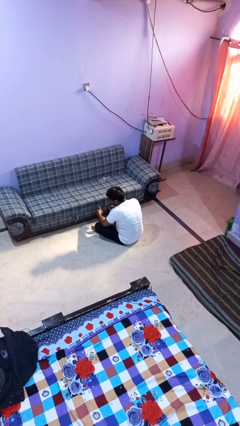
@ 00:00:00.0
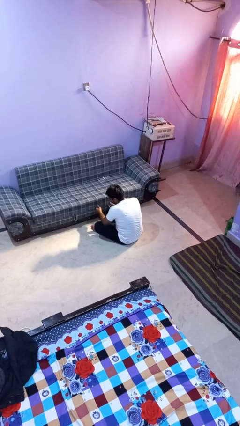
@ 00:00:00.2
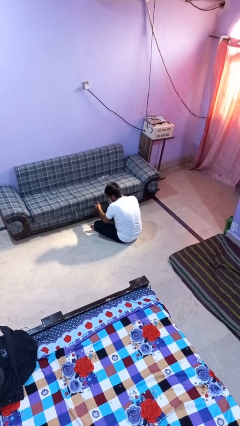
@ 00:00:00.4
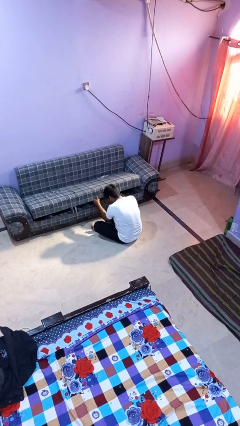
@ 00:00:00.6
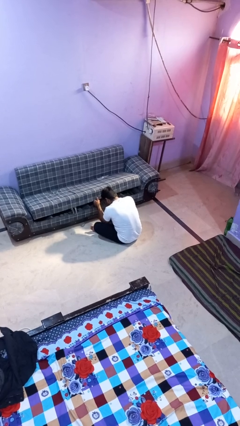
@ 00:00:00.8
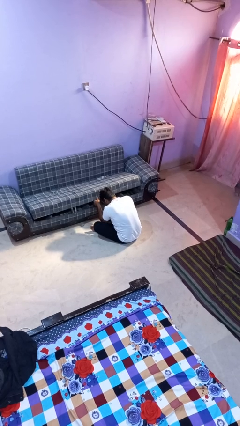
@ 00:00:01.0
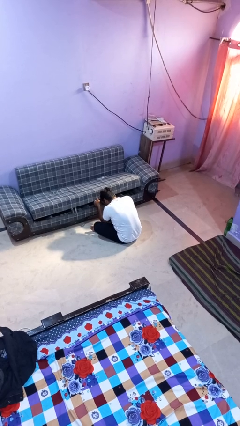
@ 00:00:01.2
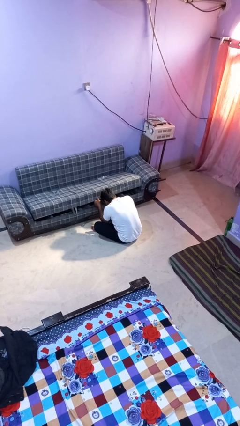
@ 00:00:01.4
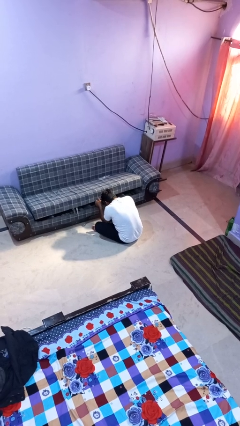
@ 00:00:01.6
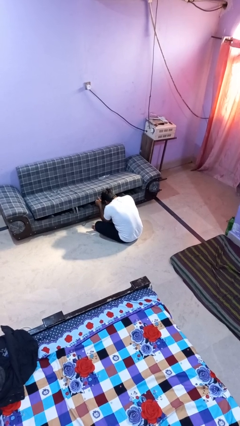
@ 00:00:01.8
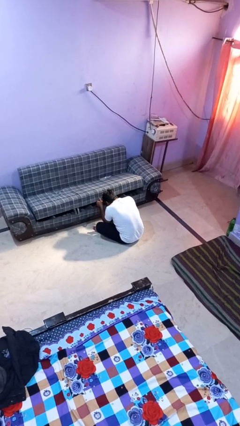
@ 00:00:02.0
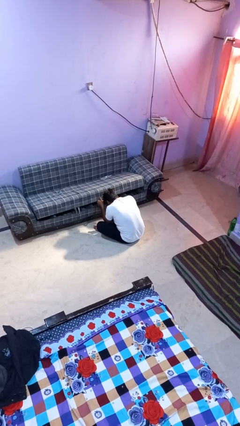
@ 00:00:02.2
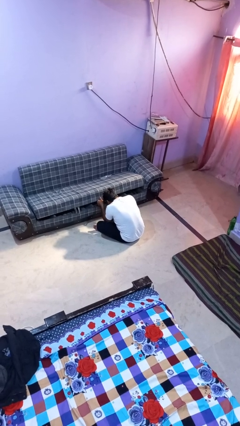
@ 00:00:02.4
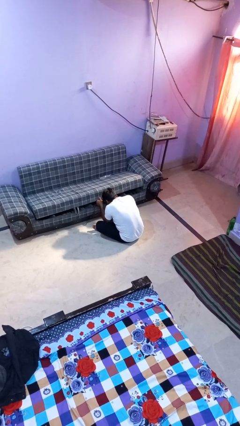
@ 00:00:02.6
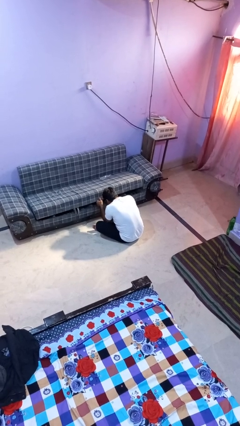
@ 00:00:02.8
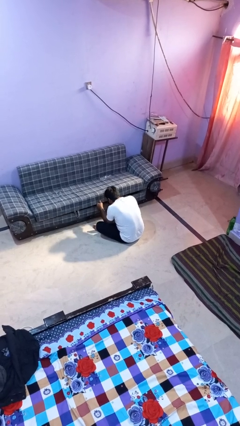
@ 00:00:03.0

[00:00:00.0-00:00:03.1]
person searches under couch

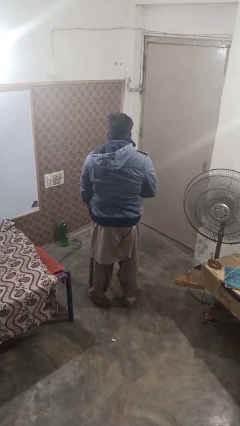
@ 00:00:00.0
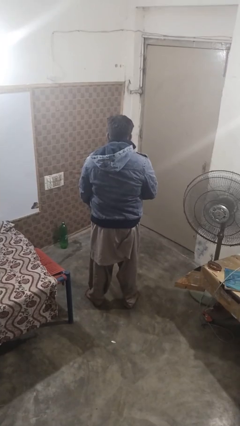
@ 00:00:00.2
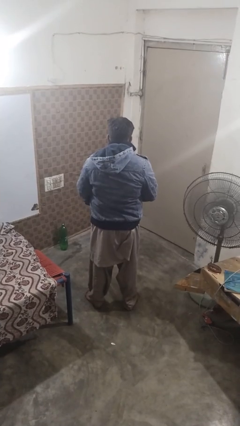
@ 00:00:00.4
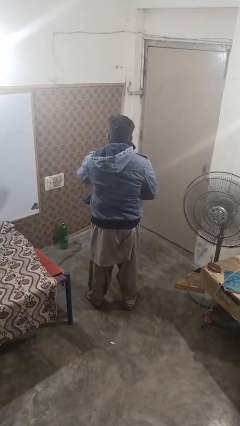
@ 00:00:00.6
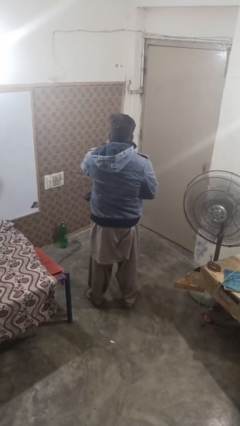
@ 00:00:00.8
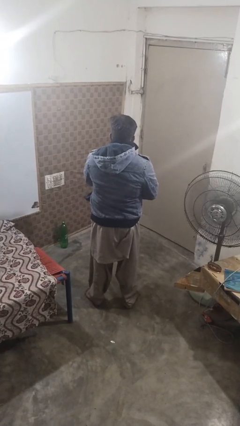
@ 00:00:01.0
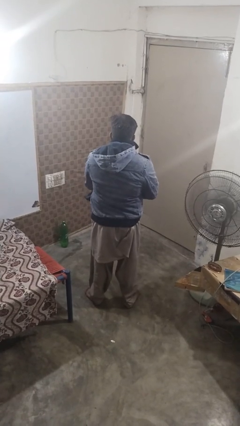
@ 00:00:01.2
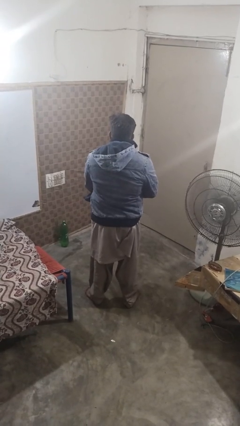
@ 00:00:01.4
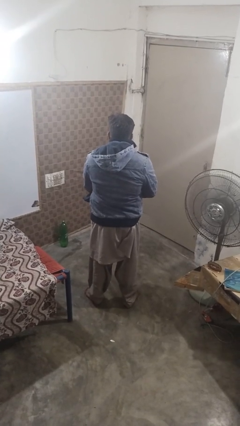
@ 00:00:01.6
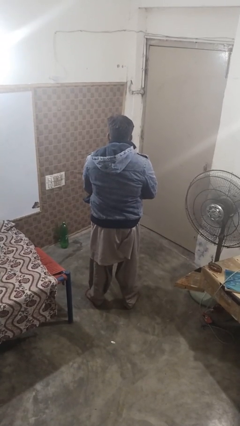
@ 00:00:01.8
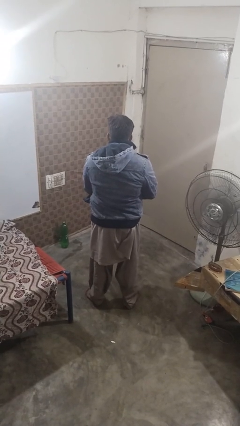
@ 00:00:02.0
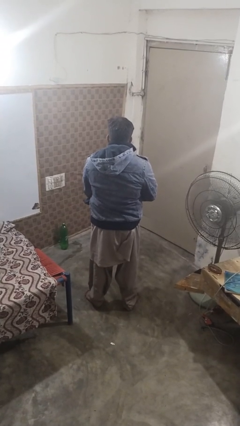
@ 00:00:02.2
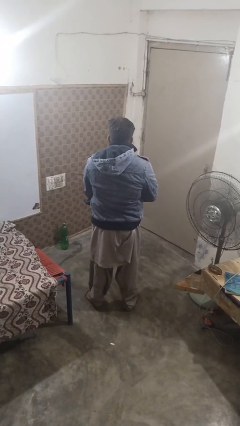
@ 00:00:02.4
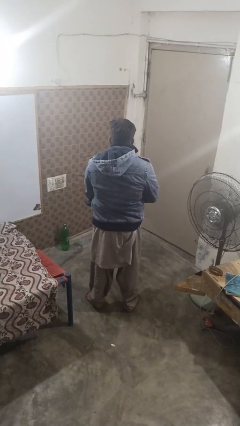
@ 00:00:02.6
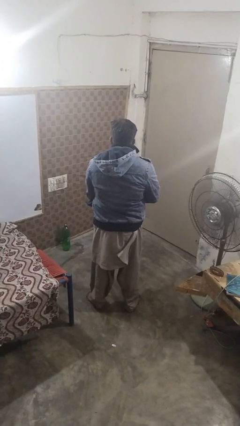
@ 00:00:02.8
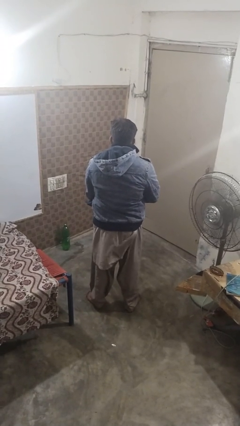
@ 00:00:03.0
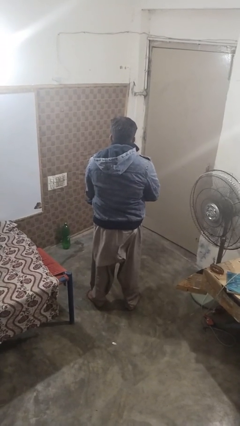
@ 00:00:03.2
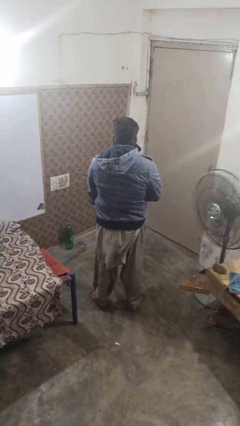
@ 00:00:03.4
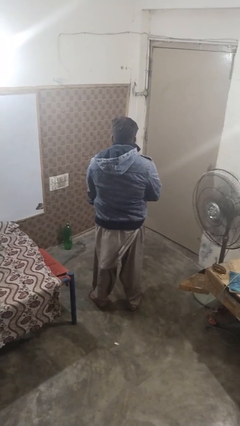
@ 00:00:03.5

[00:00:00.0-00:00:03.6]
person unzips jacket

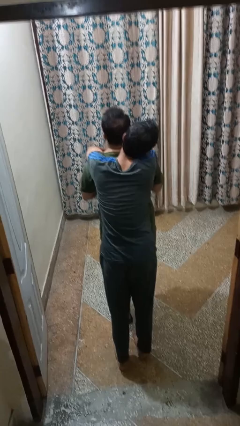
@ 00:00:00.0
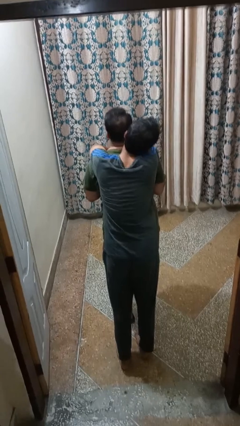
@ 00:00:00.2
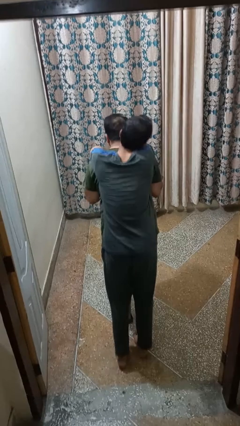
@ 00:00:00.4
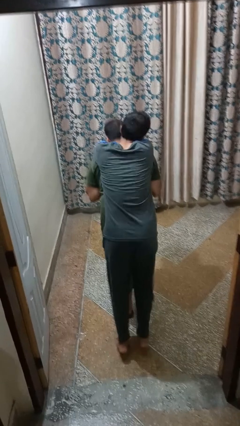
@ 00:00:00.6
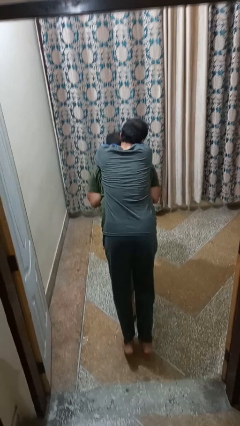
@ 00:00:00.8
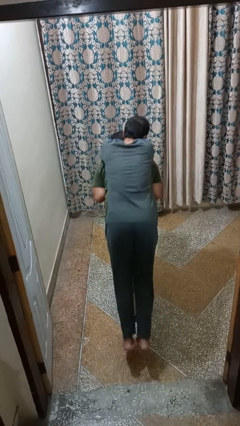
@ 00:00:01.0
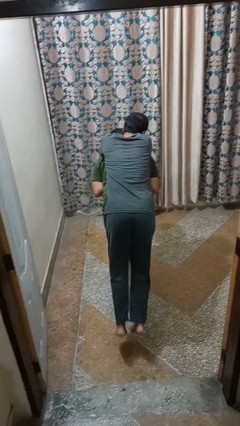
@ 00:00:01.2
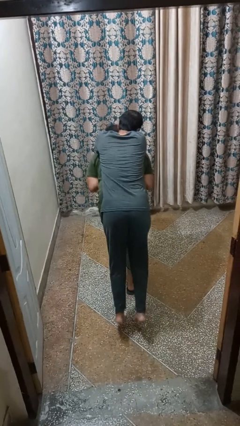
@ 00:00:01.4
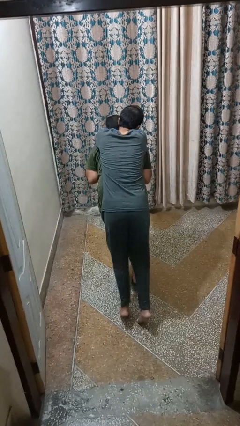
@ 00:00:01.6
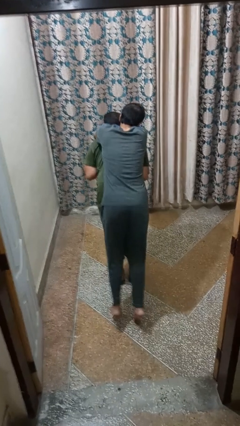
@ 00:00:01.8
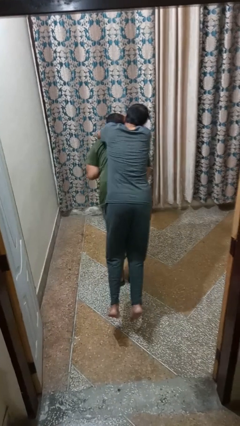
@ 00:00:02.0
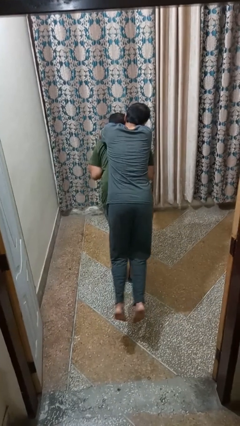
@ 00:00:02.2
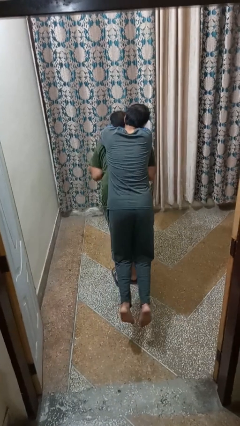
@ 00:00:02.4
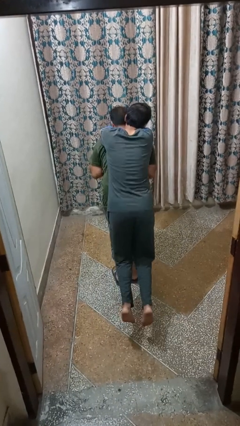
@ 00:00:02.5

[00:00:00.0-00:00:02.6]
person carries person on back

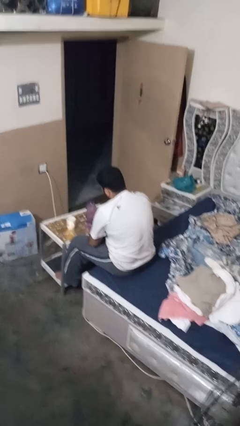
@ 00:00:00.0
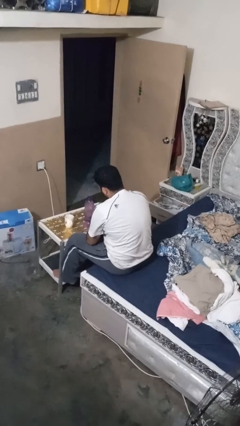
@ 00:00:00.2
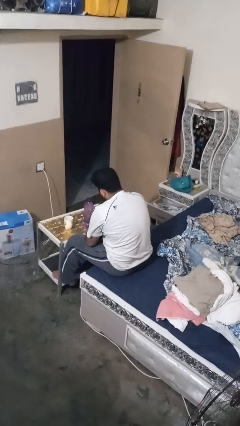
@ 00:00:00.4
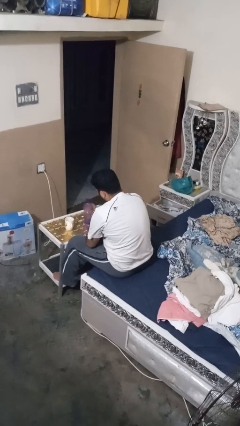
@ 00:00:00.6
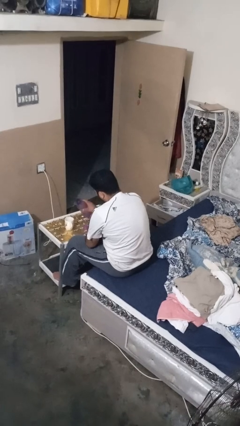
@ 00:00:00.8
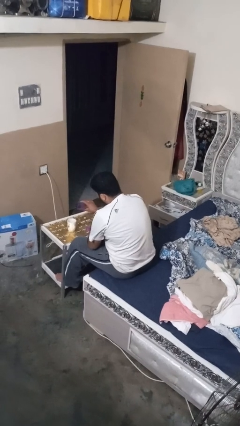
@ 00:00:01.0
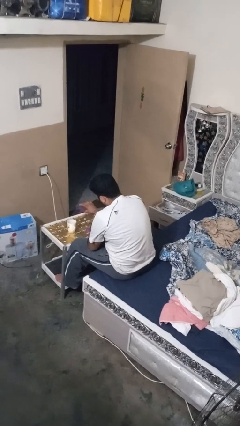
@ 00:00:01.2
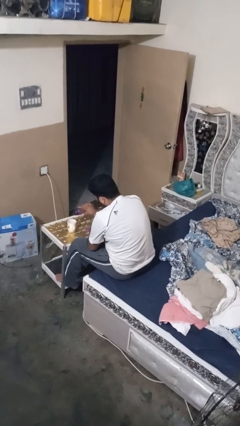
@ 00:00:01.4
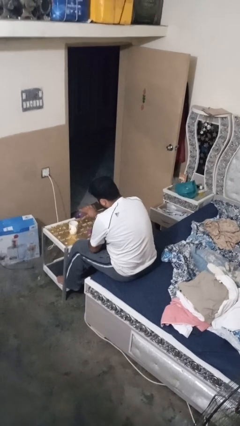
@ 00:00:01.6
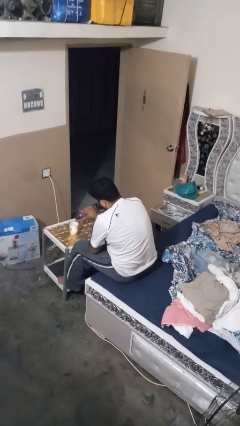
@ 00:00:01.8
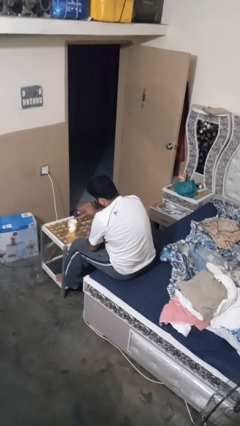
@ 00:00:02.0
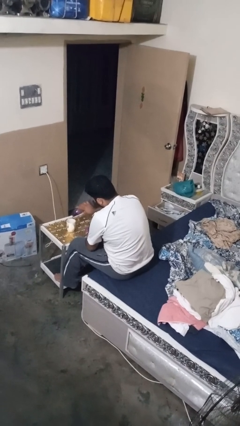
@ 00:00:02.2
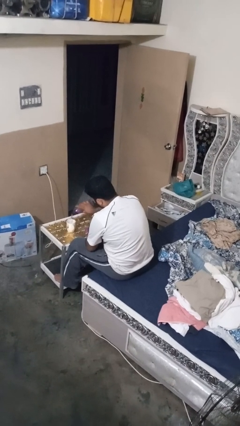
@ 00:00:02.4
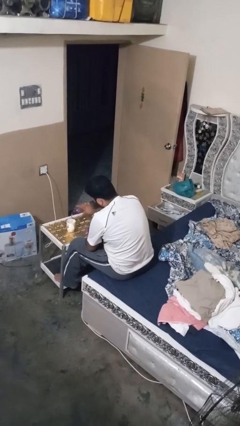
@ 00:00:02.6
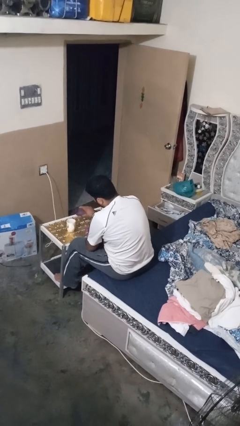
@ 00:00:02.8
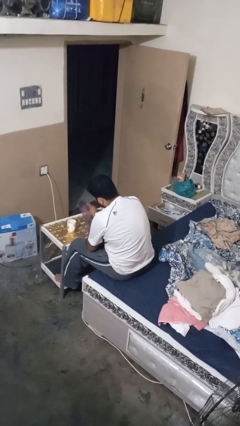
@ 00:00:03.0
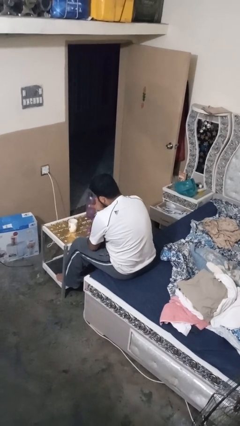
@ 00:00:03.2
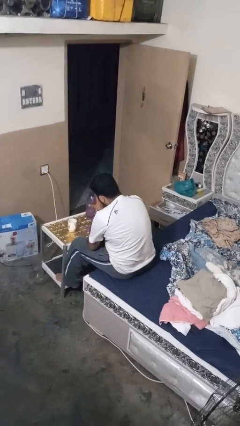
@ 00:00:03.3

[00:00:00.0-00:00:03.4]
person pours liquid into cup

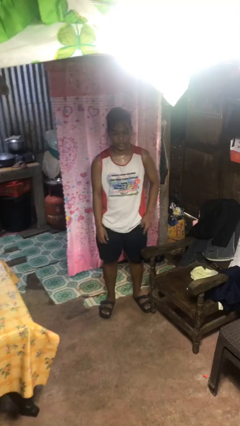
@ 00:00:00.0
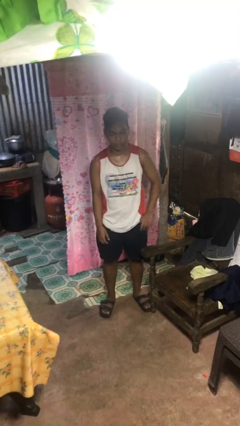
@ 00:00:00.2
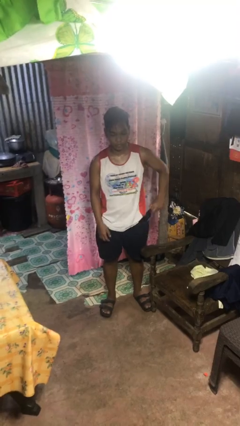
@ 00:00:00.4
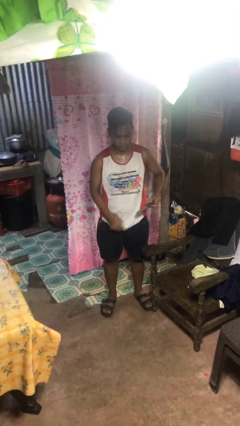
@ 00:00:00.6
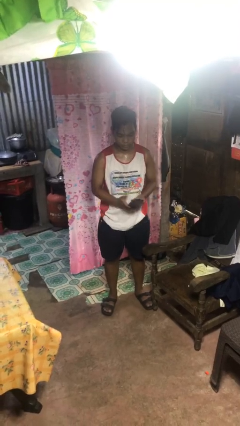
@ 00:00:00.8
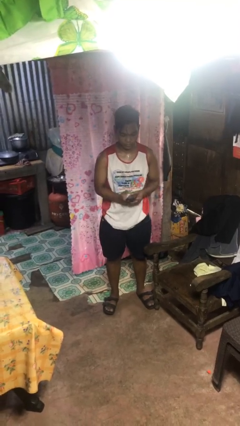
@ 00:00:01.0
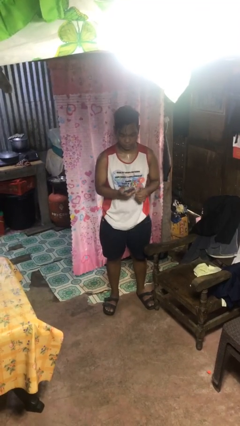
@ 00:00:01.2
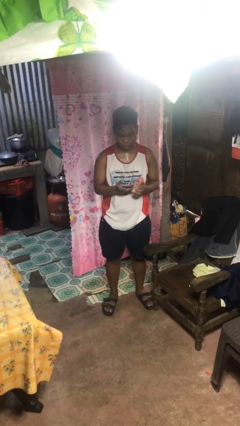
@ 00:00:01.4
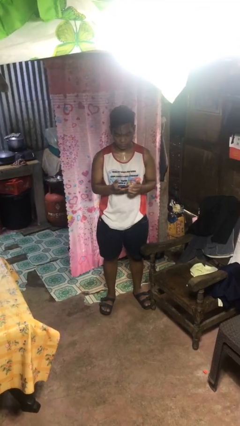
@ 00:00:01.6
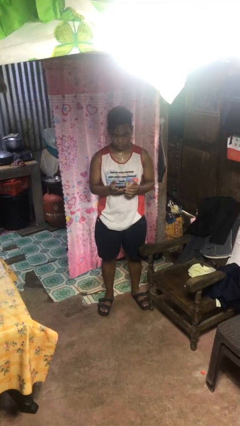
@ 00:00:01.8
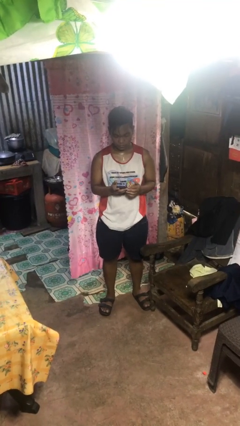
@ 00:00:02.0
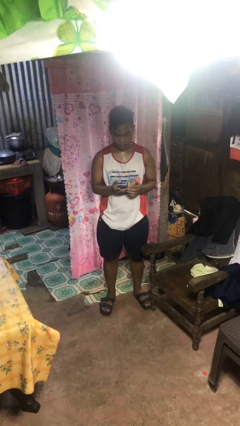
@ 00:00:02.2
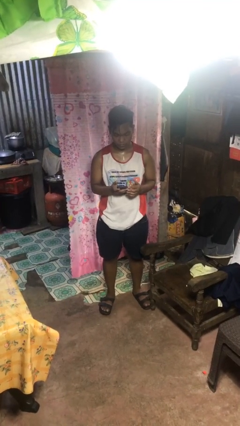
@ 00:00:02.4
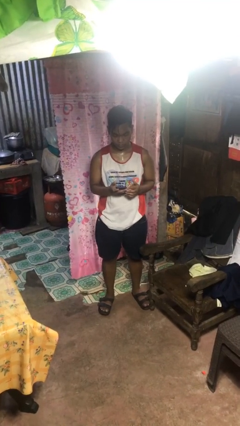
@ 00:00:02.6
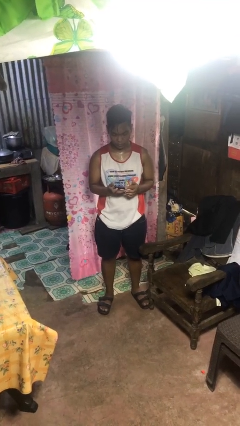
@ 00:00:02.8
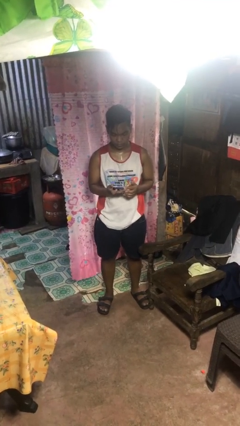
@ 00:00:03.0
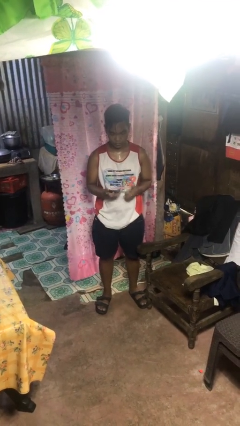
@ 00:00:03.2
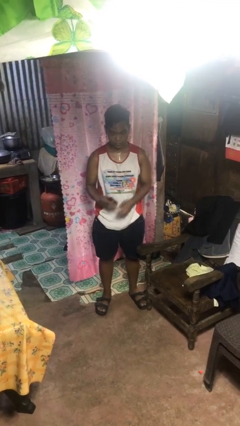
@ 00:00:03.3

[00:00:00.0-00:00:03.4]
person takes phone from pocket

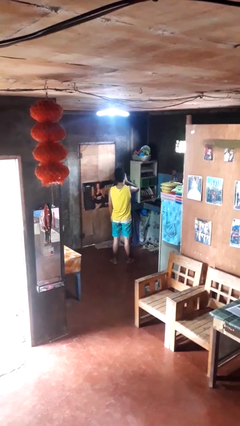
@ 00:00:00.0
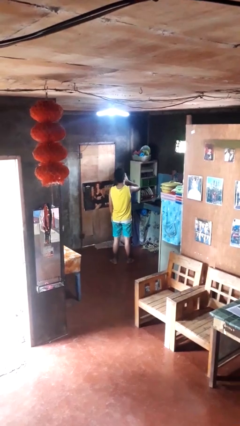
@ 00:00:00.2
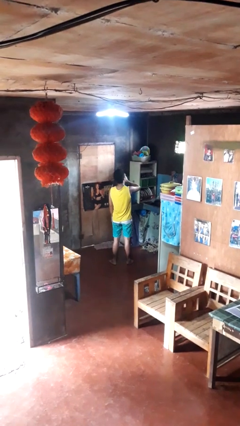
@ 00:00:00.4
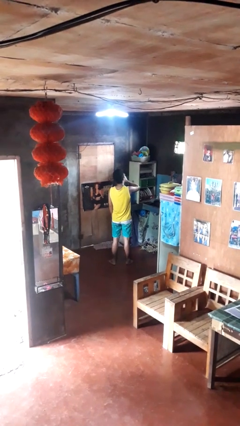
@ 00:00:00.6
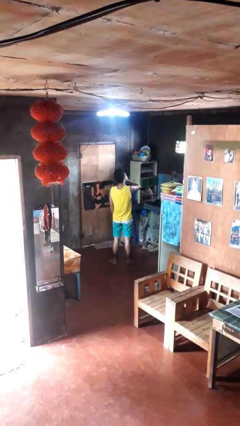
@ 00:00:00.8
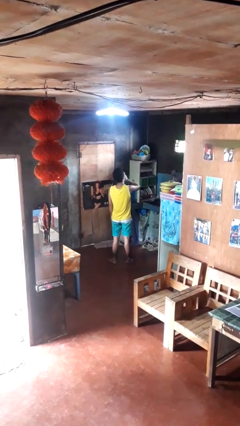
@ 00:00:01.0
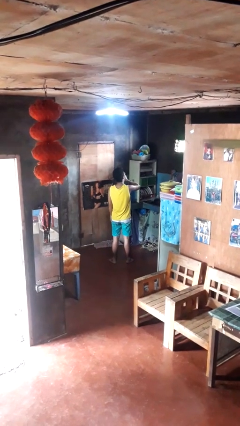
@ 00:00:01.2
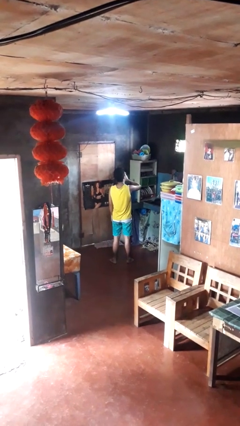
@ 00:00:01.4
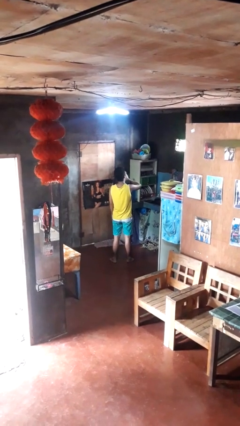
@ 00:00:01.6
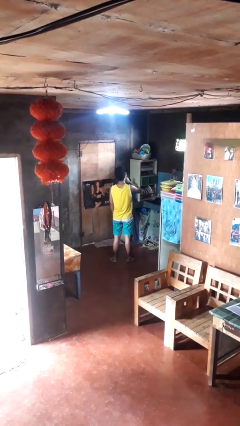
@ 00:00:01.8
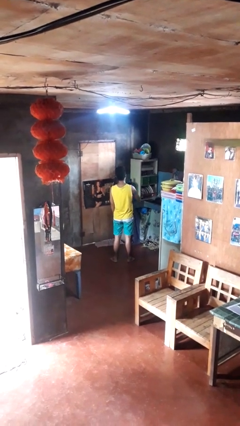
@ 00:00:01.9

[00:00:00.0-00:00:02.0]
person yawns
